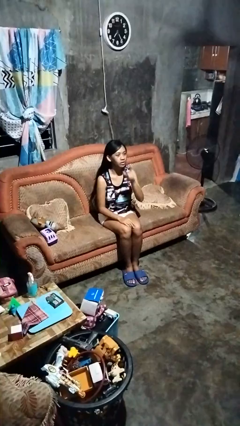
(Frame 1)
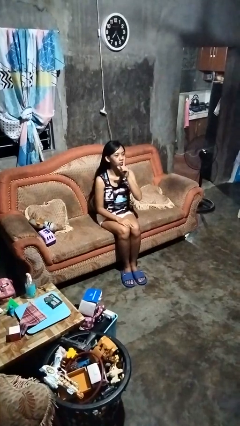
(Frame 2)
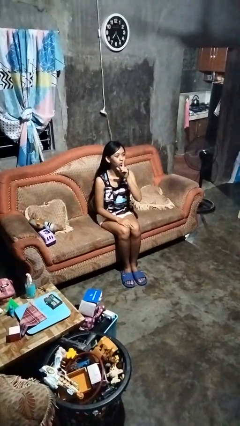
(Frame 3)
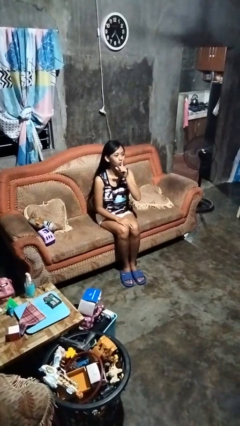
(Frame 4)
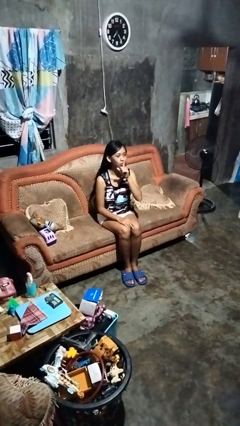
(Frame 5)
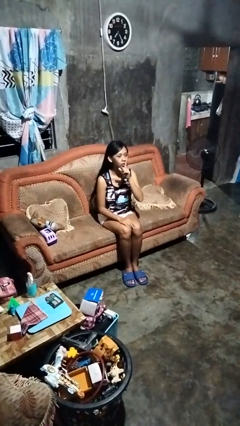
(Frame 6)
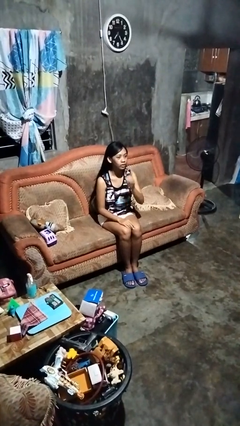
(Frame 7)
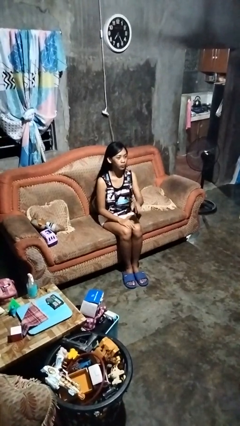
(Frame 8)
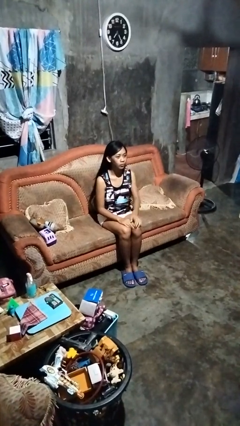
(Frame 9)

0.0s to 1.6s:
person gestures be quiet

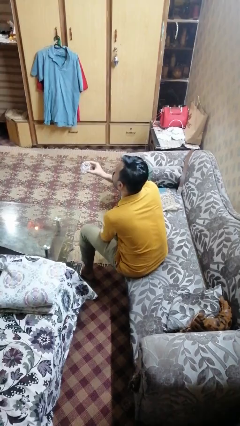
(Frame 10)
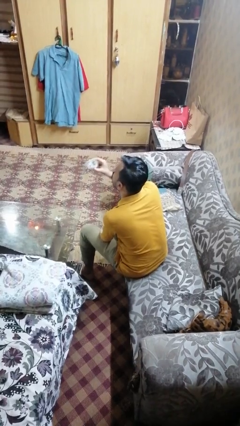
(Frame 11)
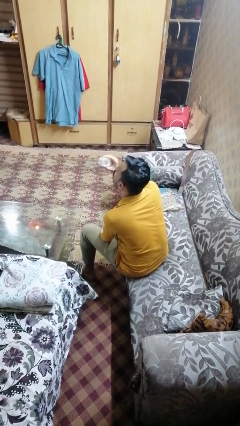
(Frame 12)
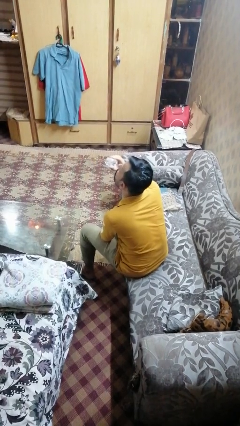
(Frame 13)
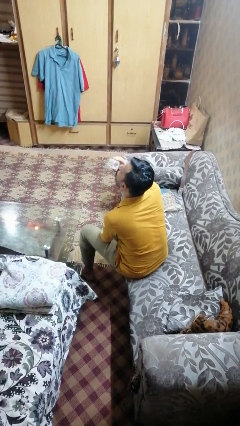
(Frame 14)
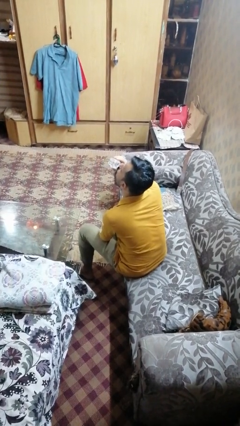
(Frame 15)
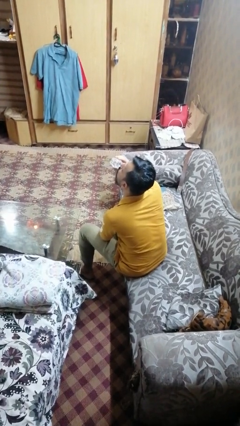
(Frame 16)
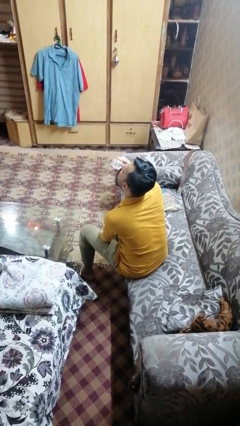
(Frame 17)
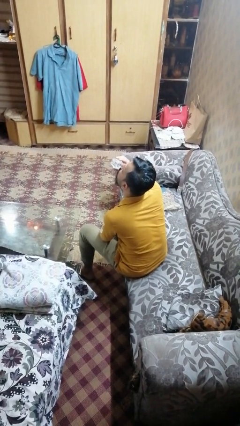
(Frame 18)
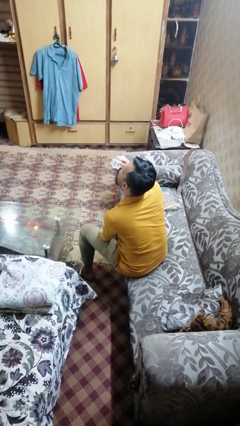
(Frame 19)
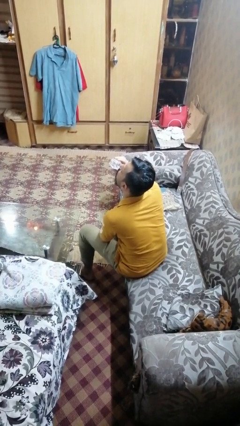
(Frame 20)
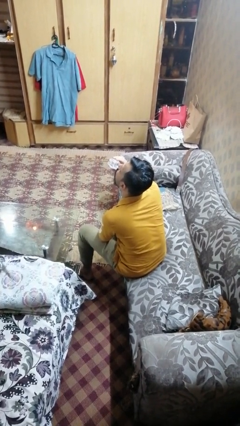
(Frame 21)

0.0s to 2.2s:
person drinks from shotglass

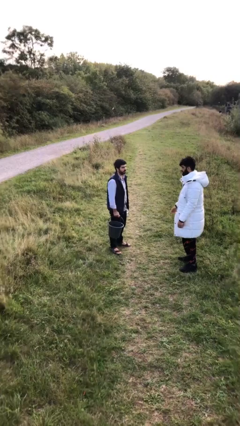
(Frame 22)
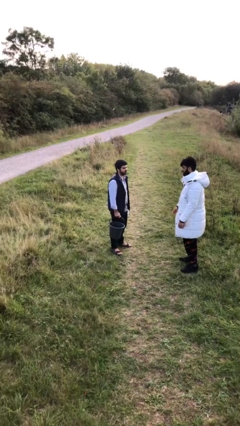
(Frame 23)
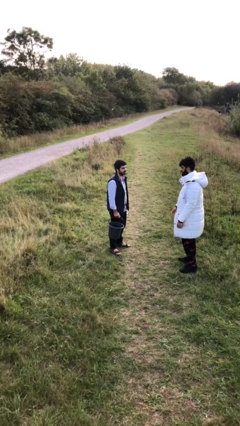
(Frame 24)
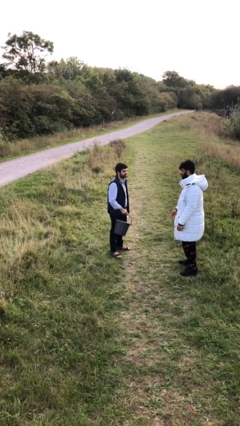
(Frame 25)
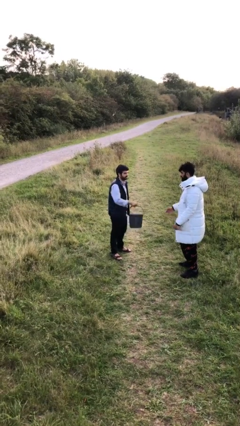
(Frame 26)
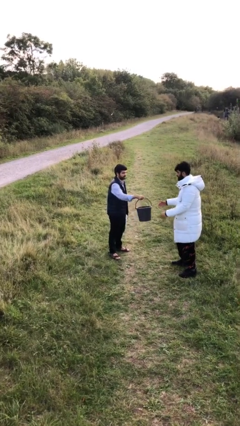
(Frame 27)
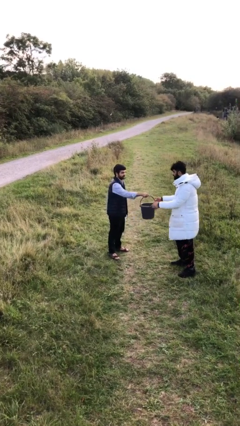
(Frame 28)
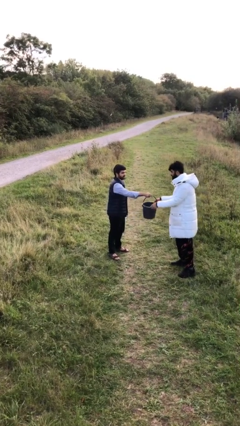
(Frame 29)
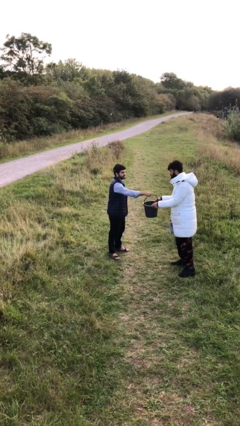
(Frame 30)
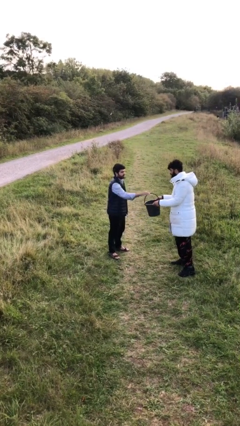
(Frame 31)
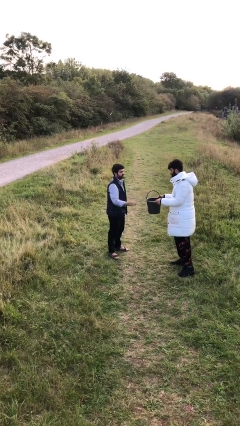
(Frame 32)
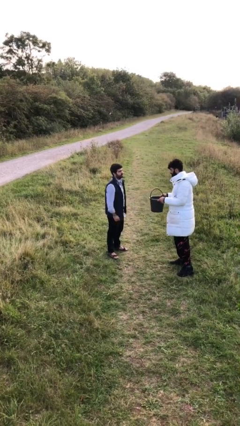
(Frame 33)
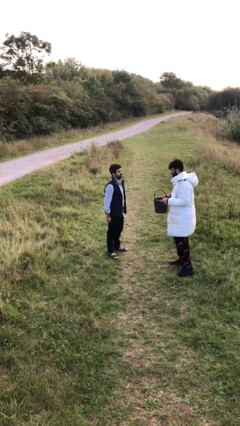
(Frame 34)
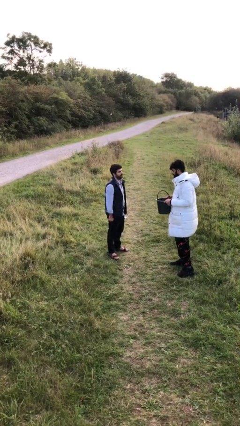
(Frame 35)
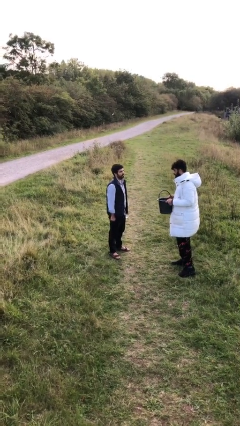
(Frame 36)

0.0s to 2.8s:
person transfers object to person

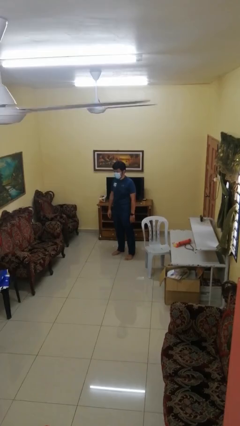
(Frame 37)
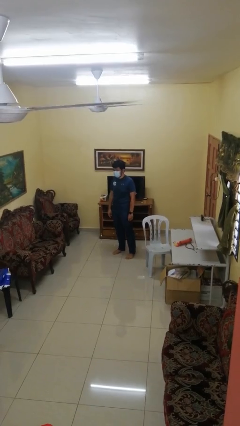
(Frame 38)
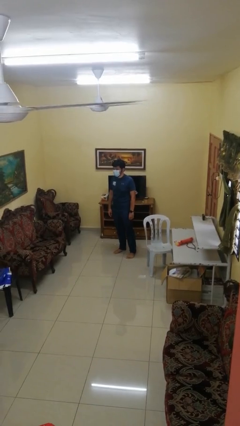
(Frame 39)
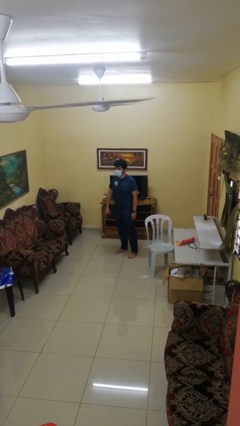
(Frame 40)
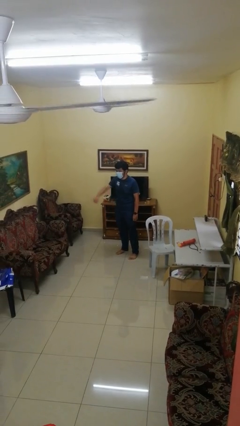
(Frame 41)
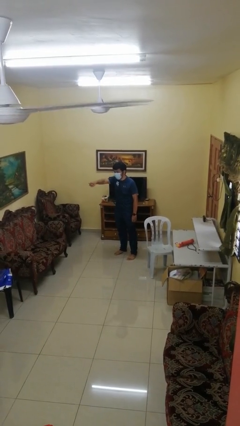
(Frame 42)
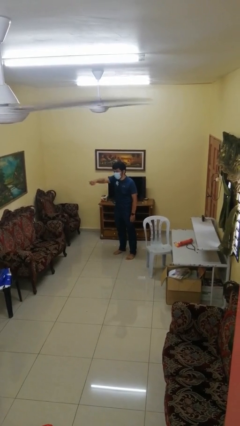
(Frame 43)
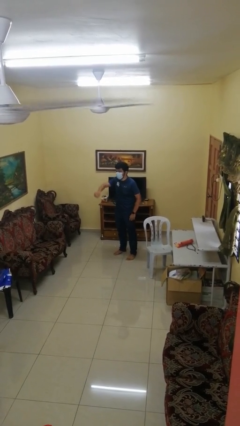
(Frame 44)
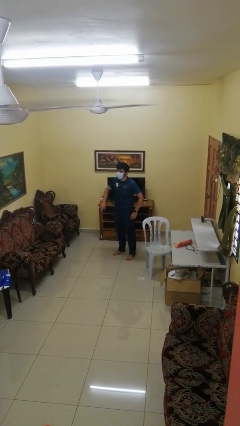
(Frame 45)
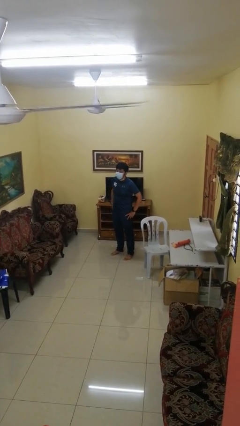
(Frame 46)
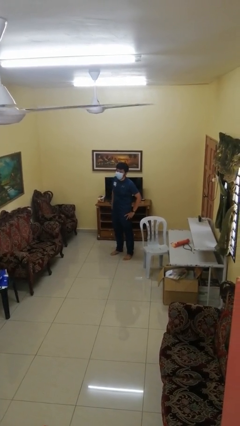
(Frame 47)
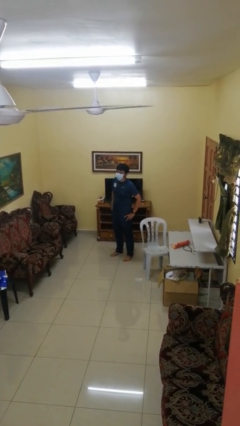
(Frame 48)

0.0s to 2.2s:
person points at person

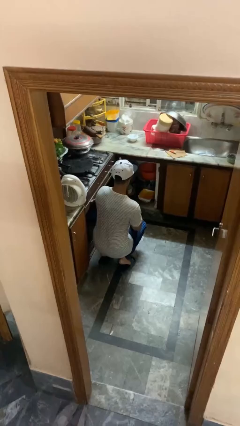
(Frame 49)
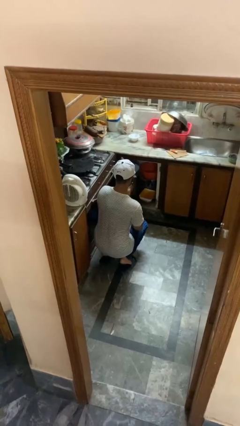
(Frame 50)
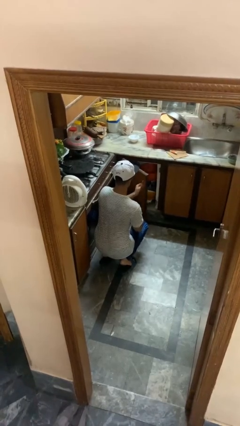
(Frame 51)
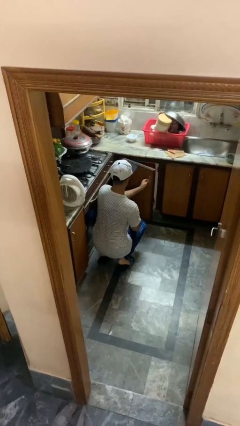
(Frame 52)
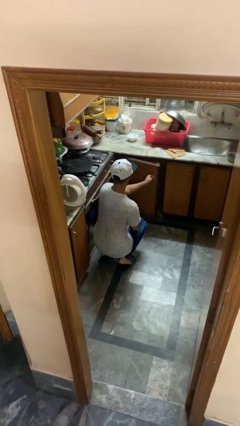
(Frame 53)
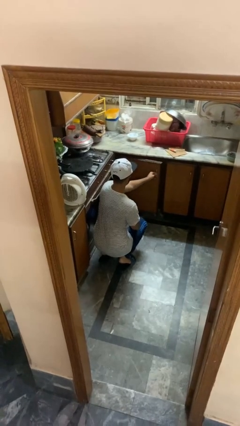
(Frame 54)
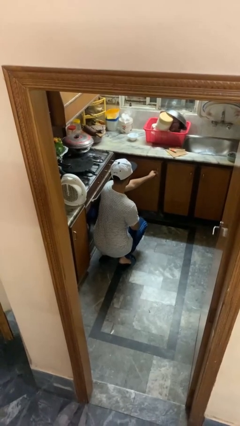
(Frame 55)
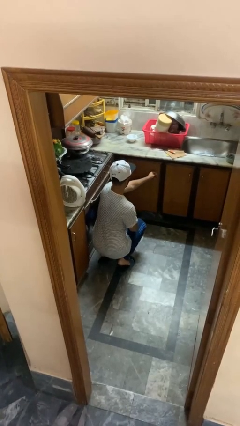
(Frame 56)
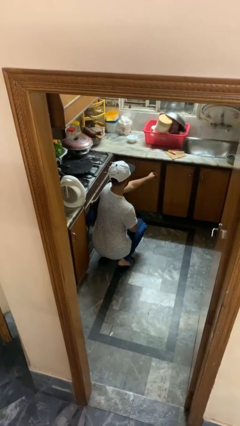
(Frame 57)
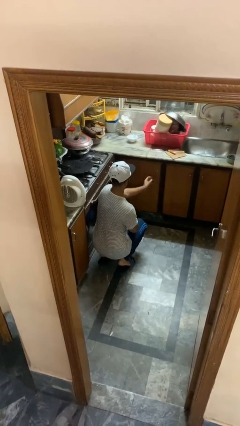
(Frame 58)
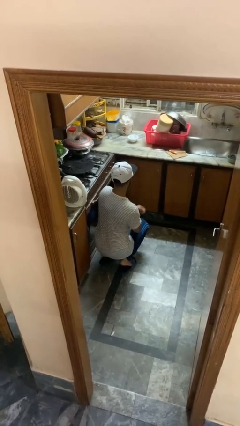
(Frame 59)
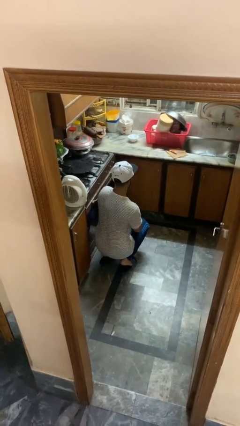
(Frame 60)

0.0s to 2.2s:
person closes kitchen drawer

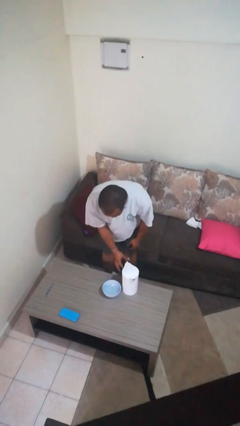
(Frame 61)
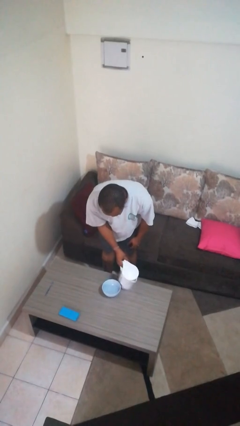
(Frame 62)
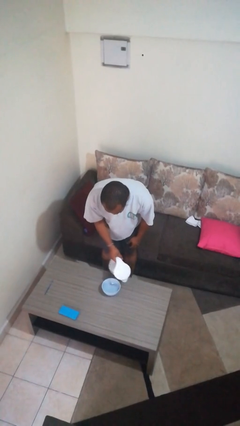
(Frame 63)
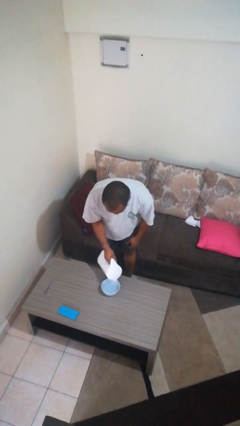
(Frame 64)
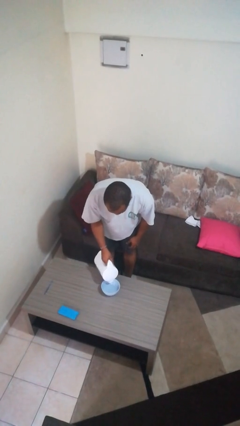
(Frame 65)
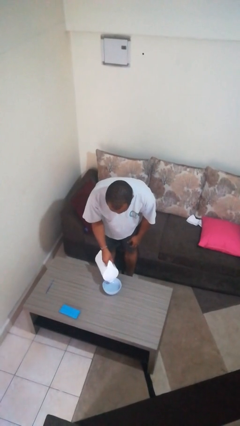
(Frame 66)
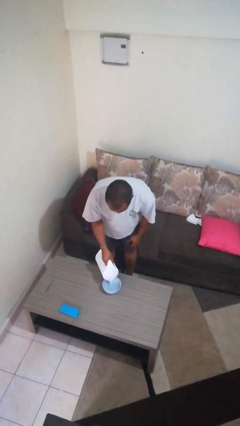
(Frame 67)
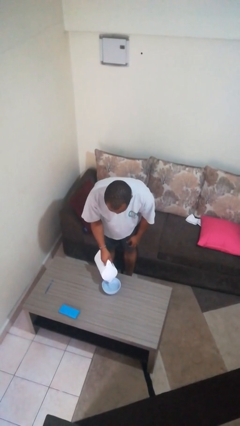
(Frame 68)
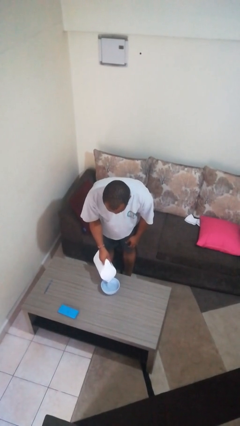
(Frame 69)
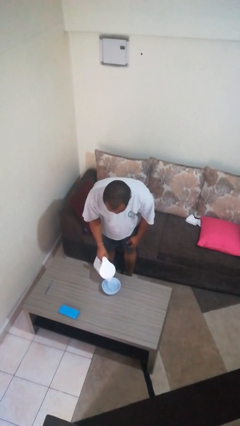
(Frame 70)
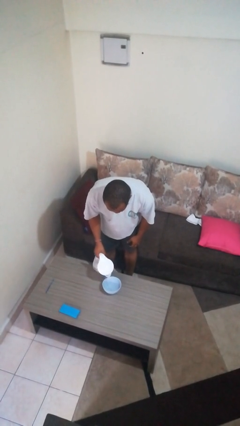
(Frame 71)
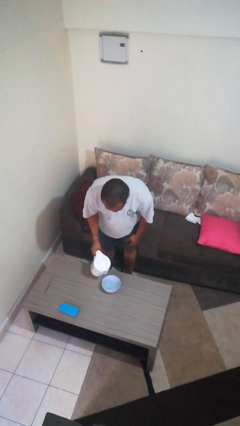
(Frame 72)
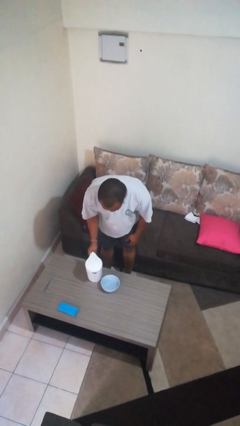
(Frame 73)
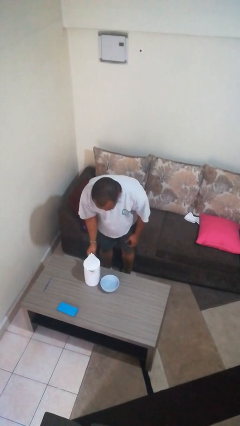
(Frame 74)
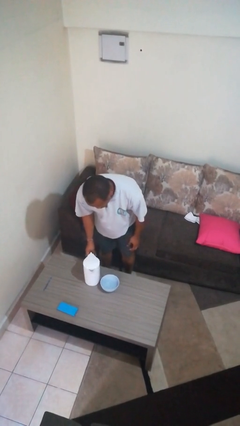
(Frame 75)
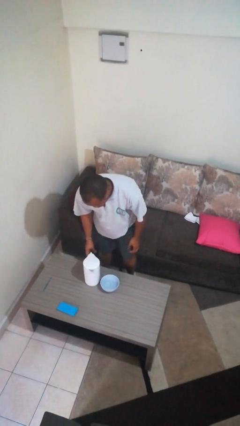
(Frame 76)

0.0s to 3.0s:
person pours into bowl

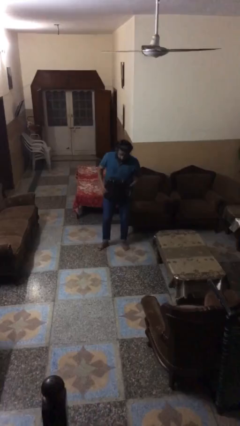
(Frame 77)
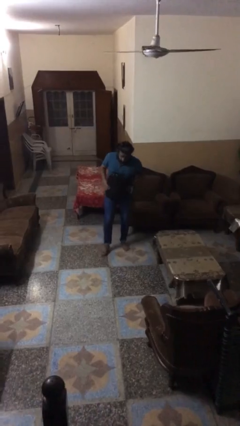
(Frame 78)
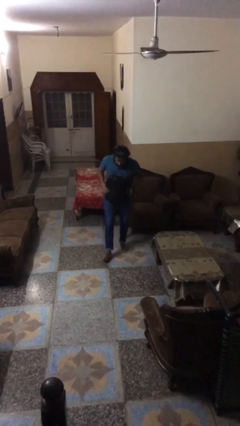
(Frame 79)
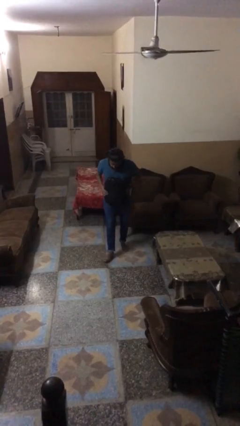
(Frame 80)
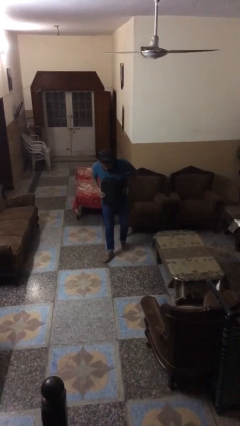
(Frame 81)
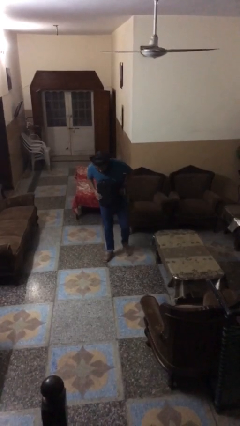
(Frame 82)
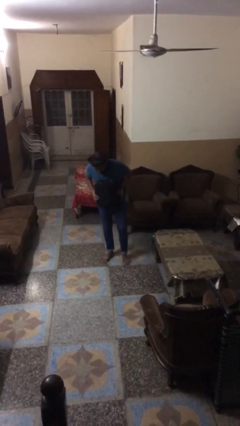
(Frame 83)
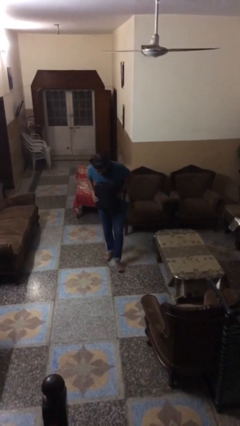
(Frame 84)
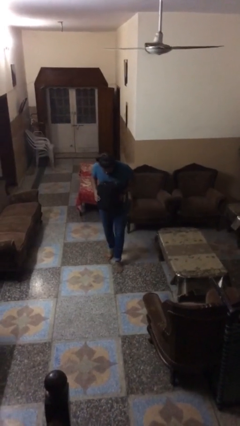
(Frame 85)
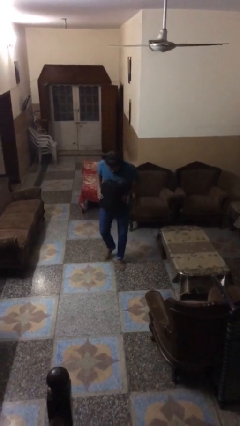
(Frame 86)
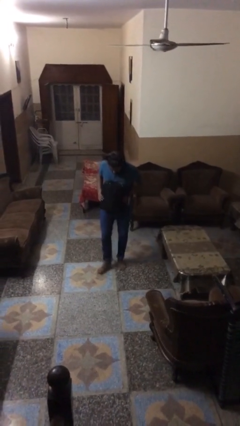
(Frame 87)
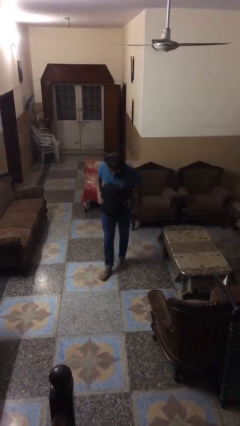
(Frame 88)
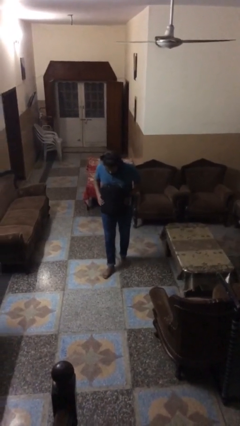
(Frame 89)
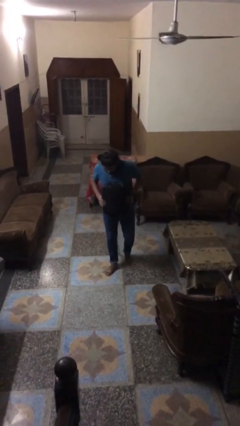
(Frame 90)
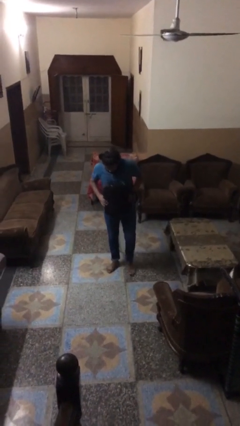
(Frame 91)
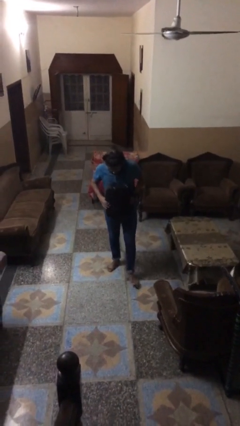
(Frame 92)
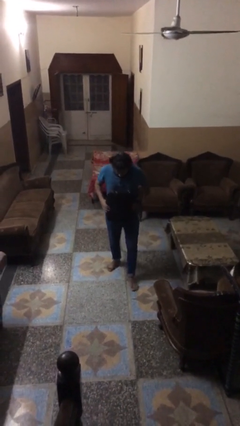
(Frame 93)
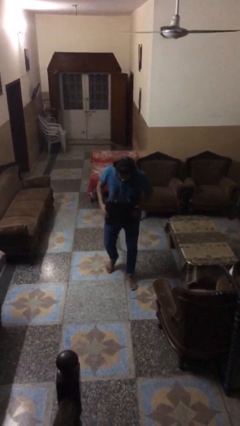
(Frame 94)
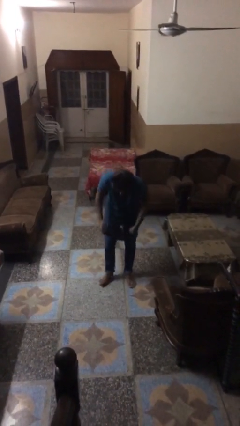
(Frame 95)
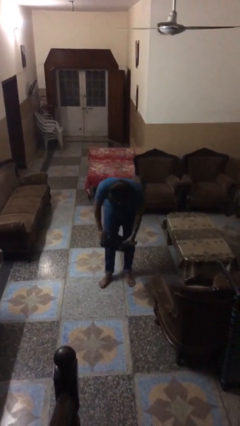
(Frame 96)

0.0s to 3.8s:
person carries heavy object
